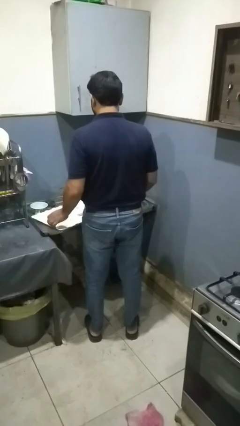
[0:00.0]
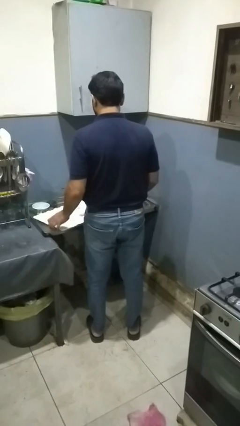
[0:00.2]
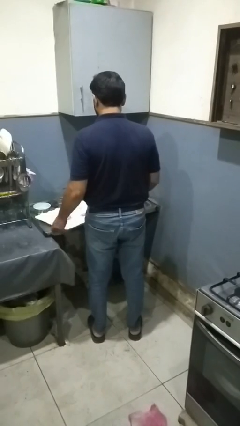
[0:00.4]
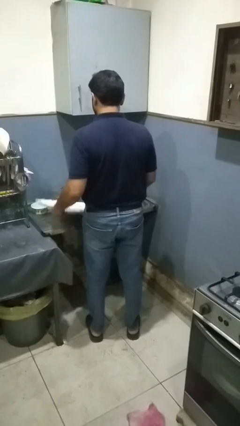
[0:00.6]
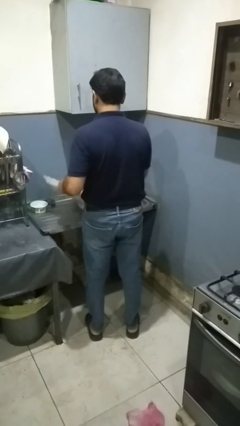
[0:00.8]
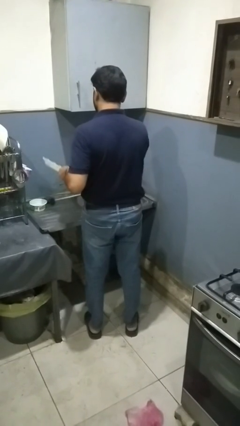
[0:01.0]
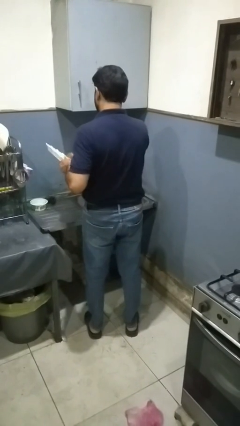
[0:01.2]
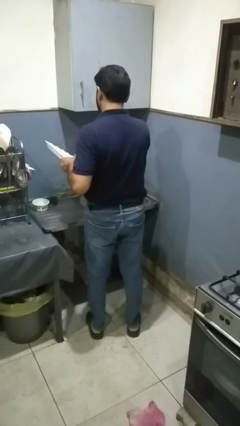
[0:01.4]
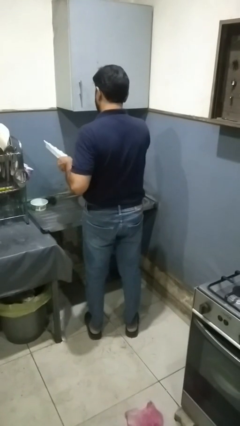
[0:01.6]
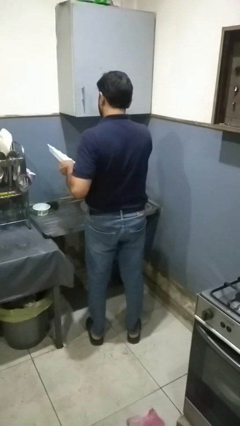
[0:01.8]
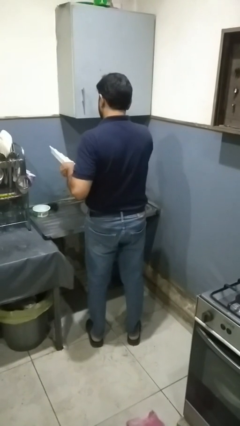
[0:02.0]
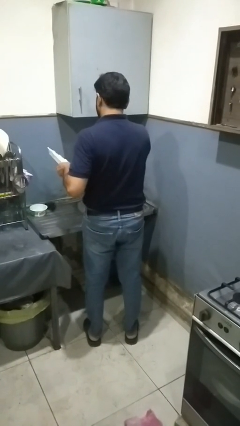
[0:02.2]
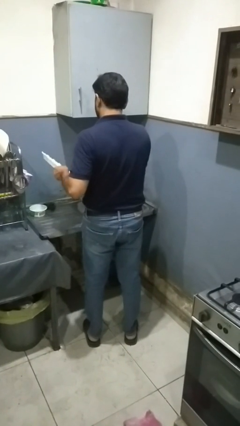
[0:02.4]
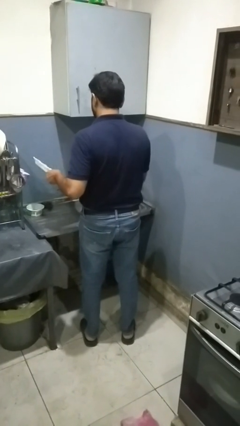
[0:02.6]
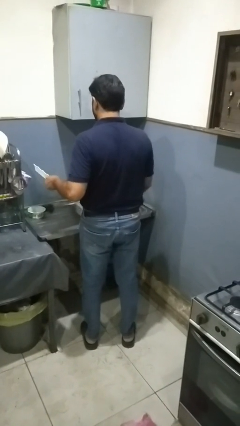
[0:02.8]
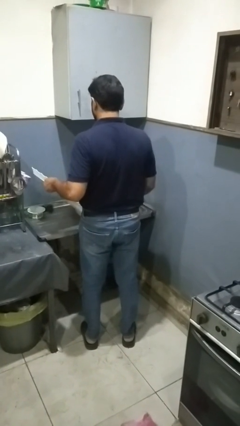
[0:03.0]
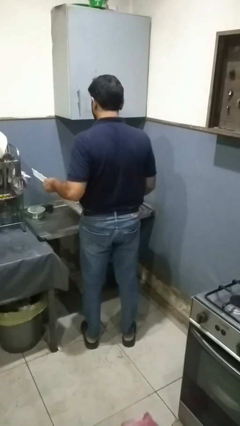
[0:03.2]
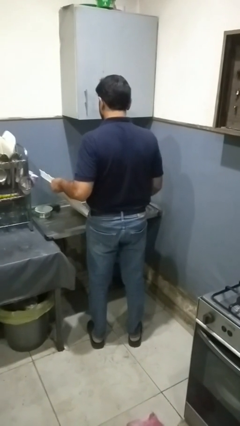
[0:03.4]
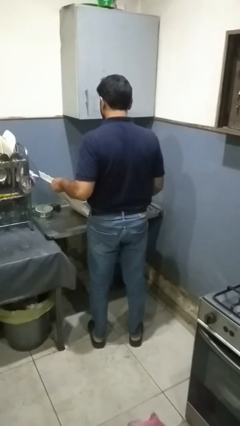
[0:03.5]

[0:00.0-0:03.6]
person washes dish

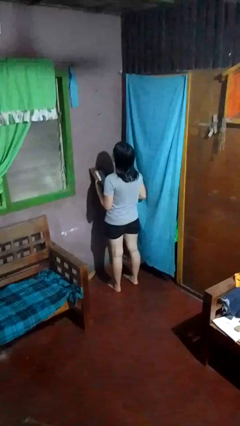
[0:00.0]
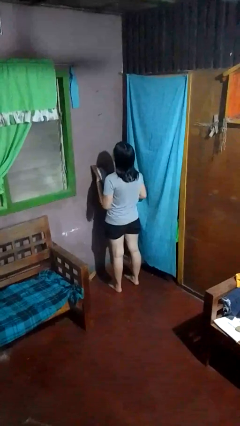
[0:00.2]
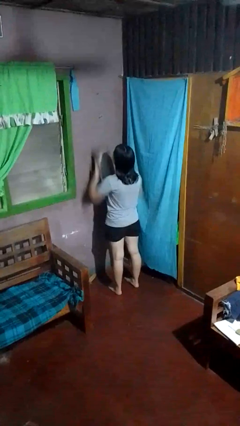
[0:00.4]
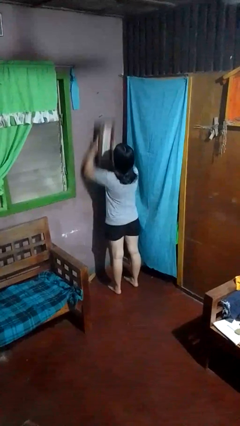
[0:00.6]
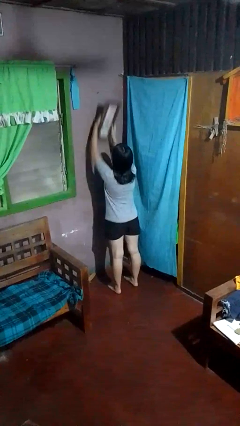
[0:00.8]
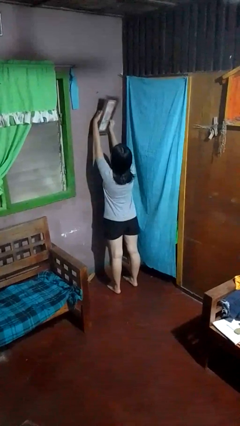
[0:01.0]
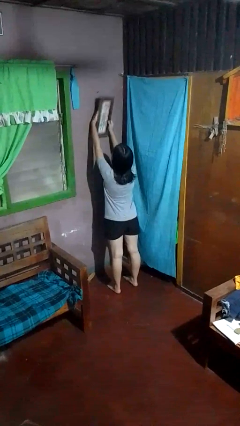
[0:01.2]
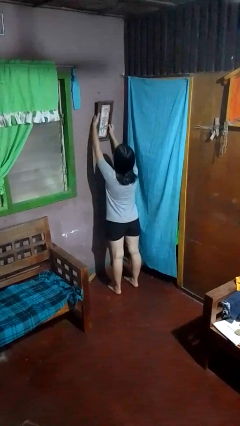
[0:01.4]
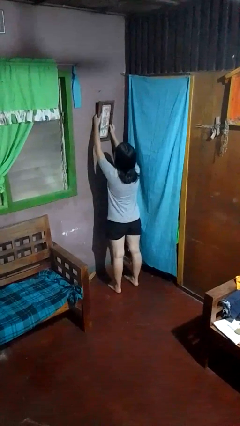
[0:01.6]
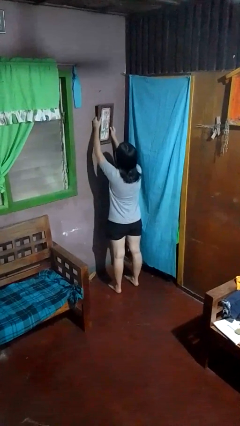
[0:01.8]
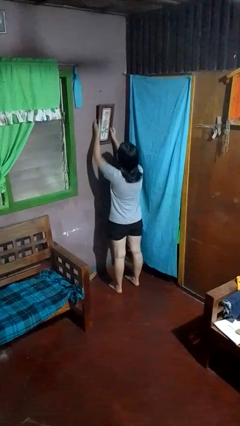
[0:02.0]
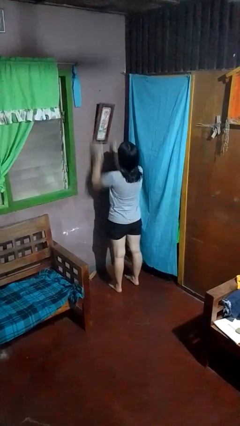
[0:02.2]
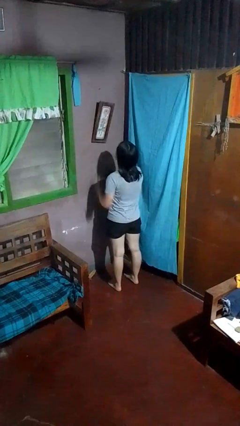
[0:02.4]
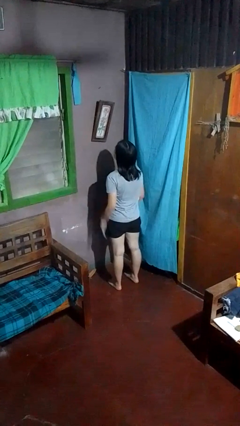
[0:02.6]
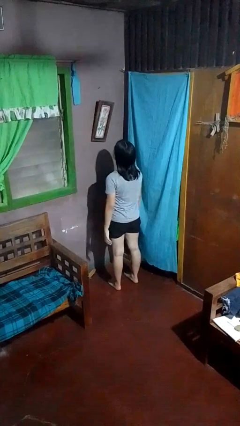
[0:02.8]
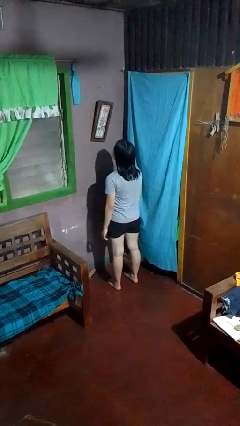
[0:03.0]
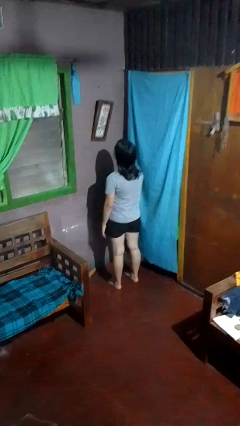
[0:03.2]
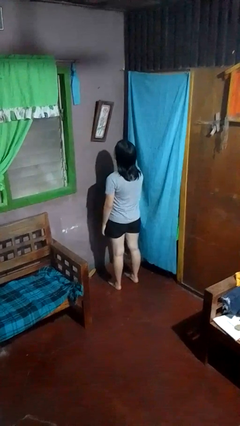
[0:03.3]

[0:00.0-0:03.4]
person puts up picture frame

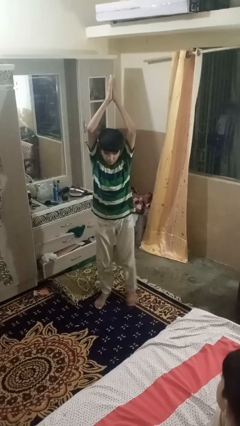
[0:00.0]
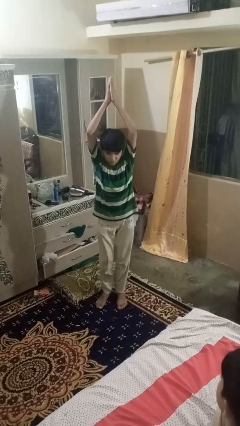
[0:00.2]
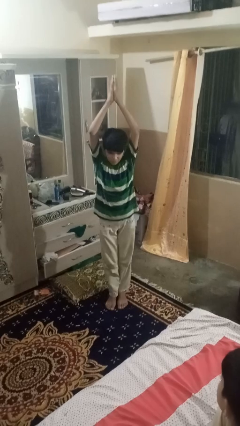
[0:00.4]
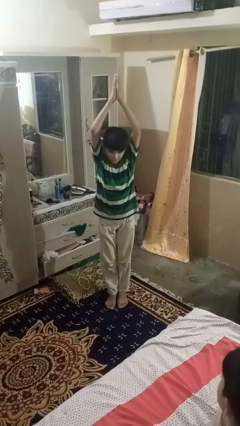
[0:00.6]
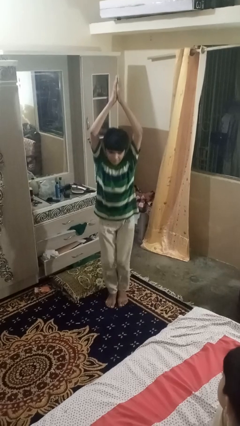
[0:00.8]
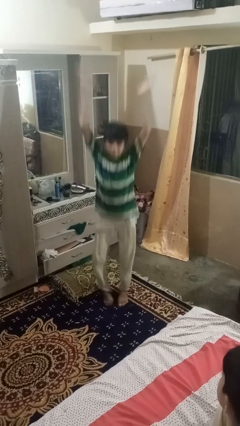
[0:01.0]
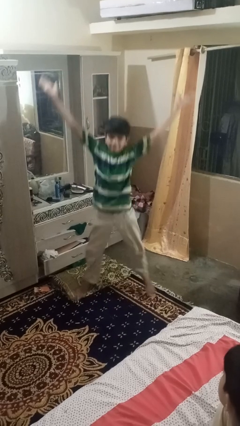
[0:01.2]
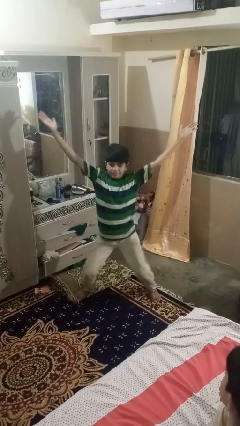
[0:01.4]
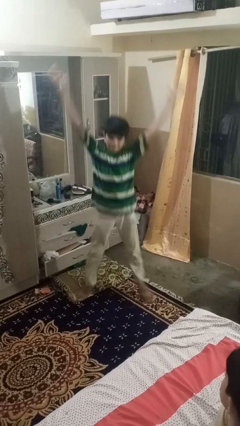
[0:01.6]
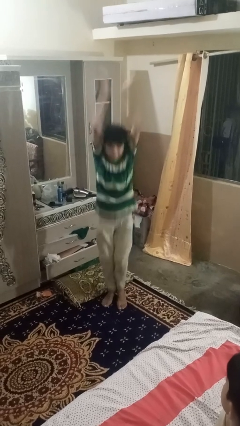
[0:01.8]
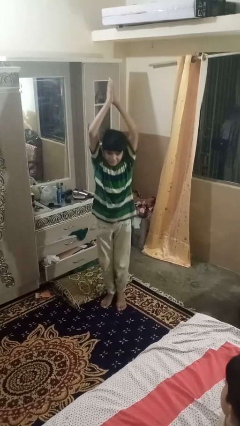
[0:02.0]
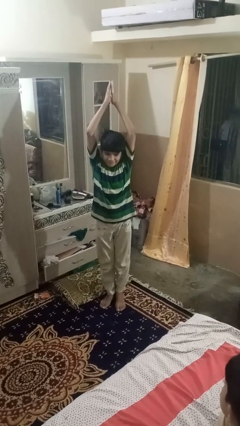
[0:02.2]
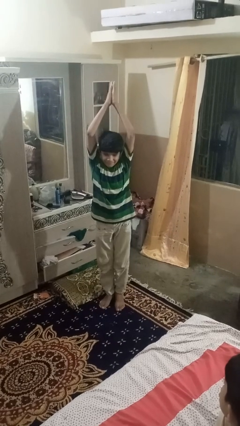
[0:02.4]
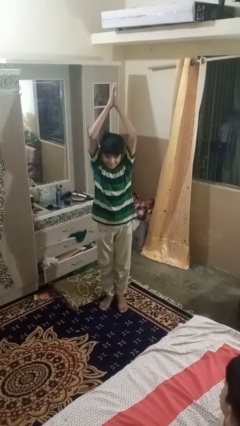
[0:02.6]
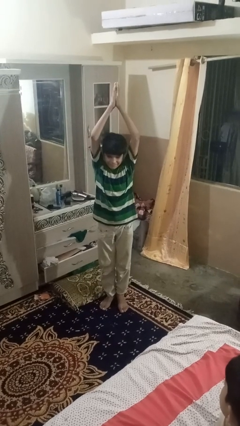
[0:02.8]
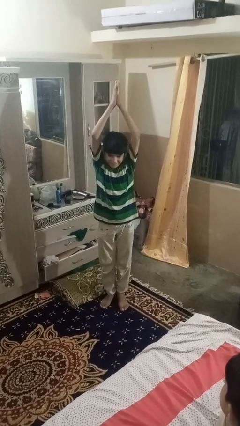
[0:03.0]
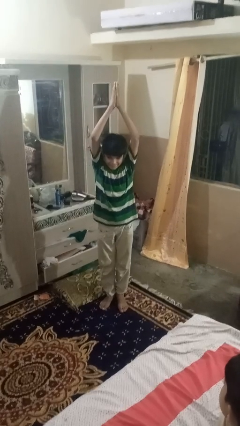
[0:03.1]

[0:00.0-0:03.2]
person exercises with jumping jacks

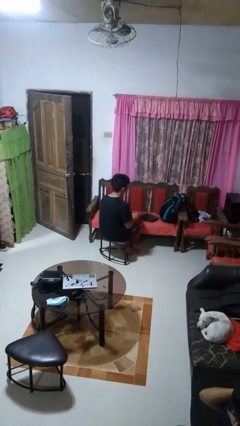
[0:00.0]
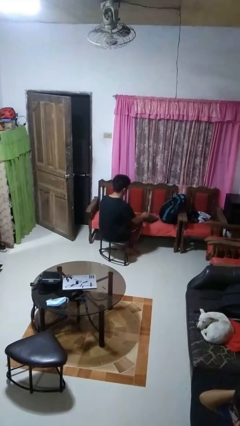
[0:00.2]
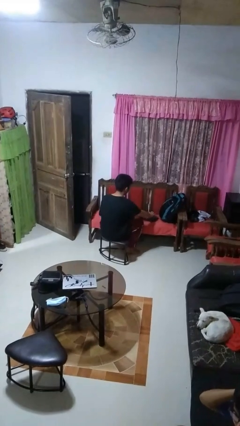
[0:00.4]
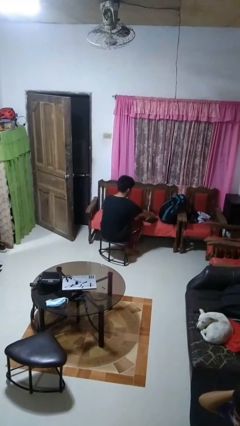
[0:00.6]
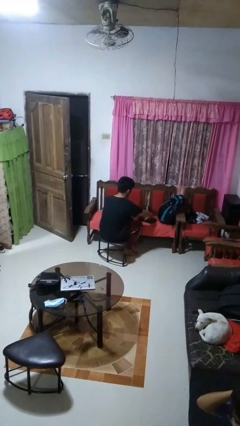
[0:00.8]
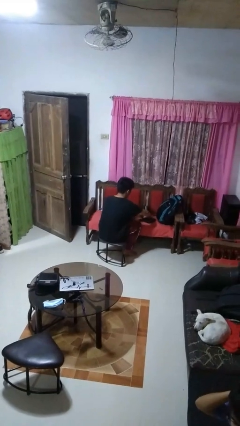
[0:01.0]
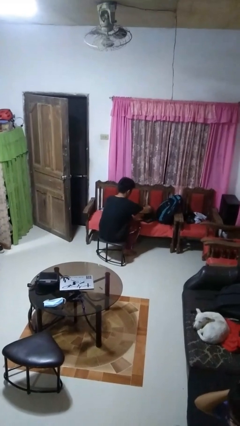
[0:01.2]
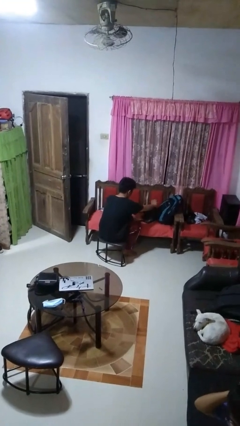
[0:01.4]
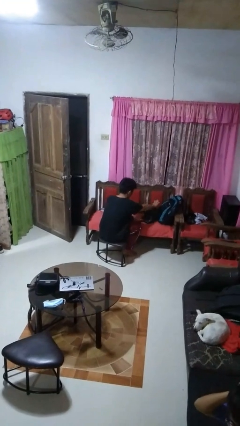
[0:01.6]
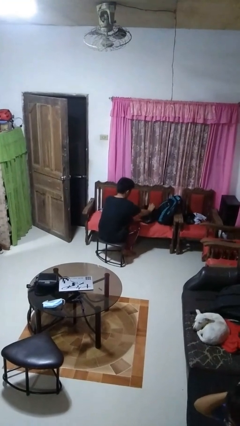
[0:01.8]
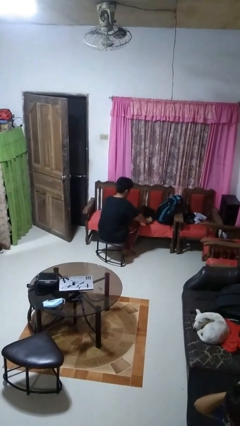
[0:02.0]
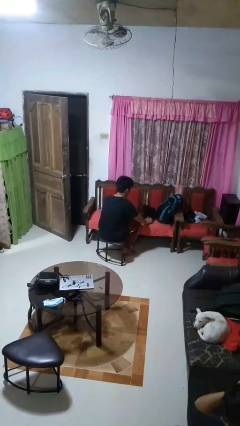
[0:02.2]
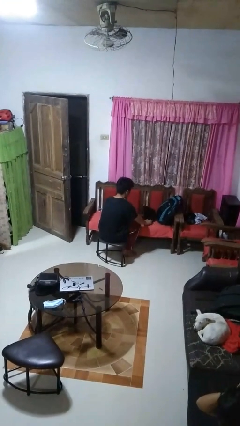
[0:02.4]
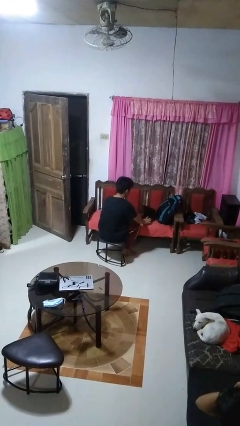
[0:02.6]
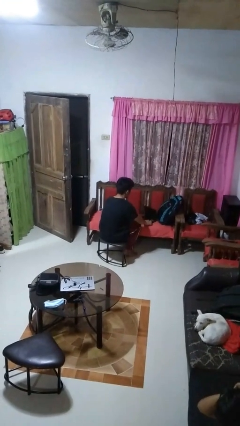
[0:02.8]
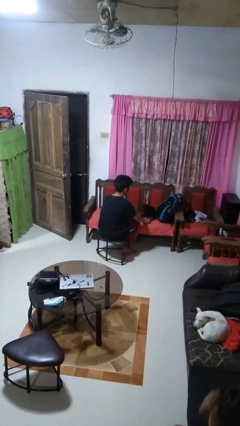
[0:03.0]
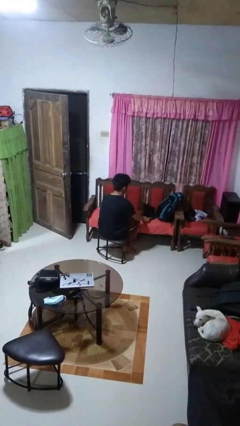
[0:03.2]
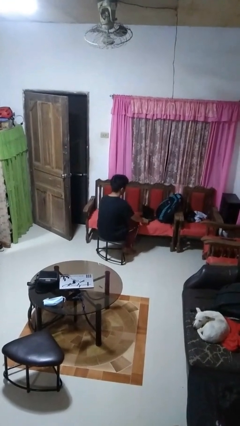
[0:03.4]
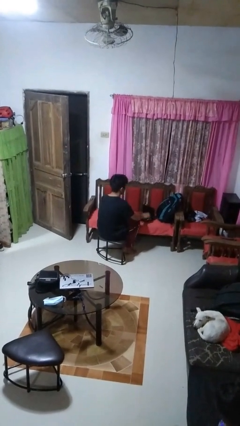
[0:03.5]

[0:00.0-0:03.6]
person opens laptop

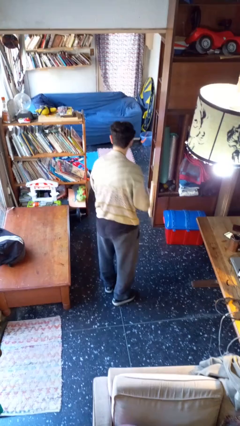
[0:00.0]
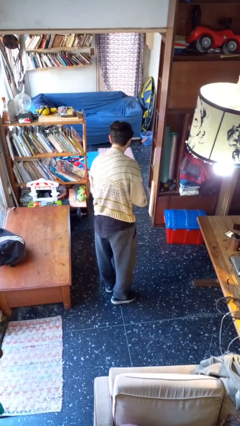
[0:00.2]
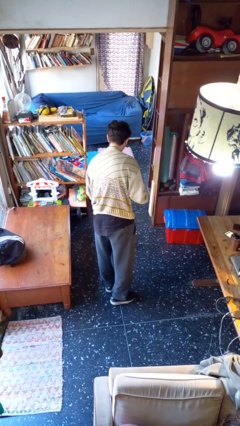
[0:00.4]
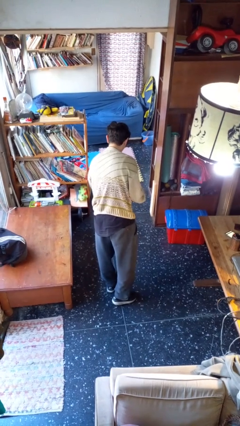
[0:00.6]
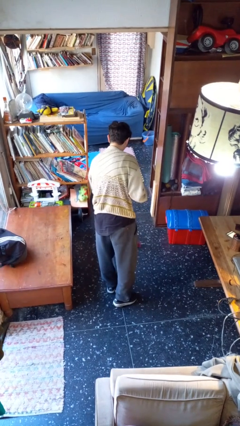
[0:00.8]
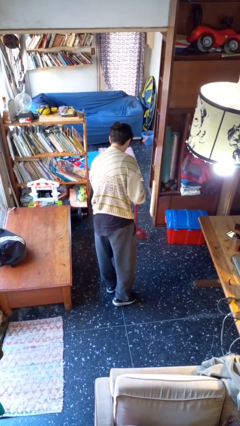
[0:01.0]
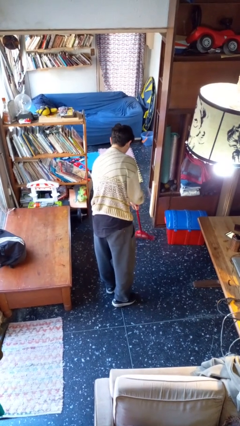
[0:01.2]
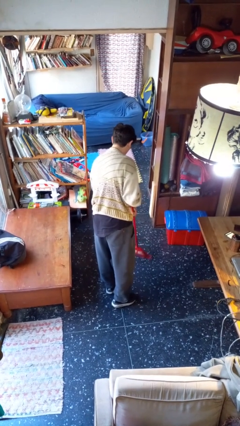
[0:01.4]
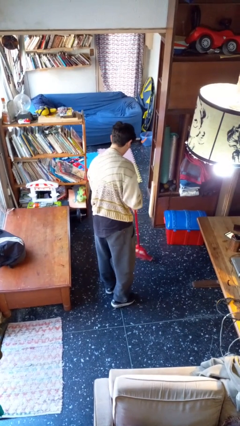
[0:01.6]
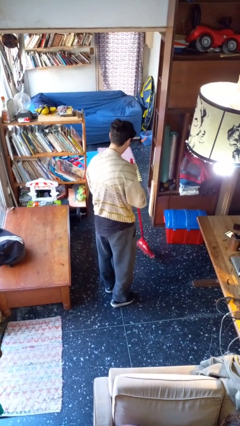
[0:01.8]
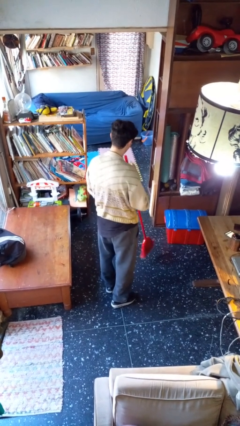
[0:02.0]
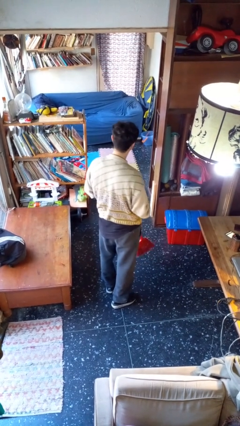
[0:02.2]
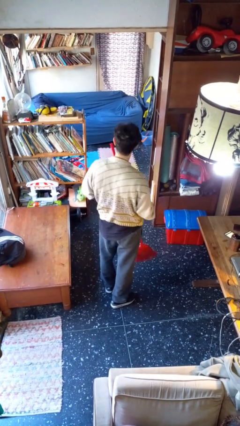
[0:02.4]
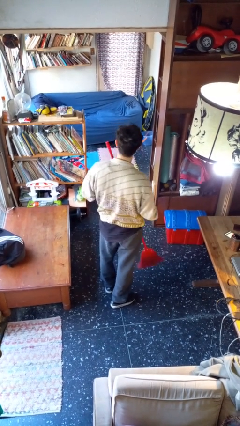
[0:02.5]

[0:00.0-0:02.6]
person sweeps floor

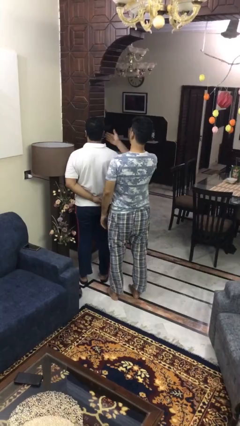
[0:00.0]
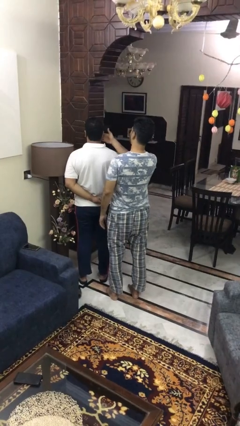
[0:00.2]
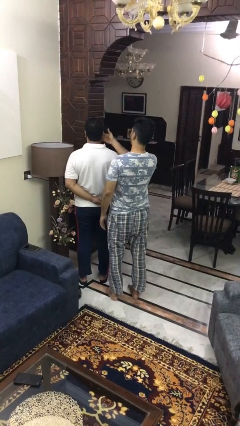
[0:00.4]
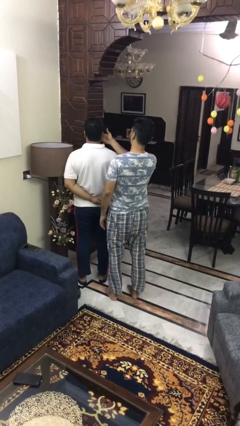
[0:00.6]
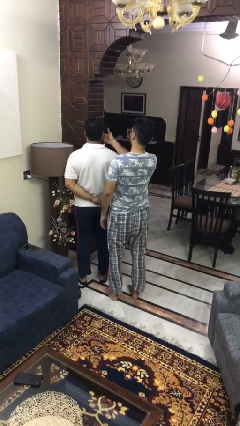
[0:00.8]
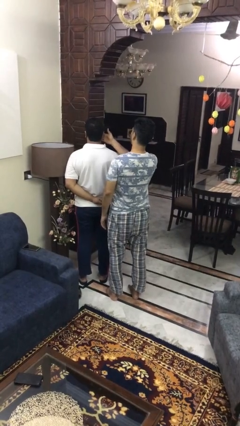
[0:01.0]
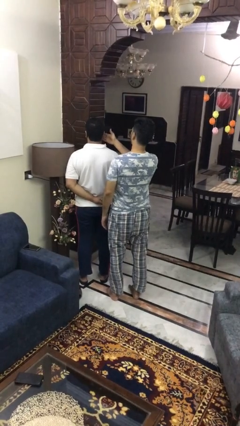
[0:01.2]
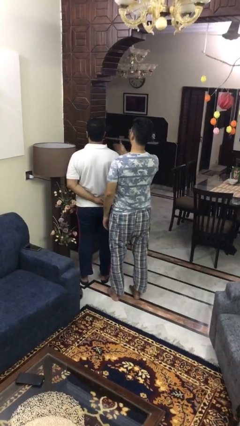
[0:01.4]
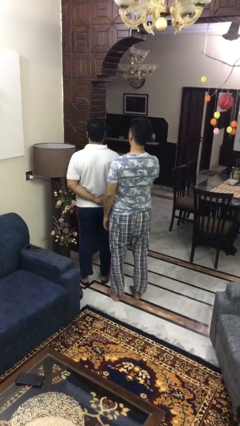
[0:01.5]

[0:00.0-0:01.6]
person touches face of person
